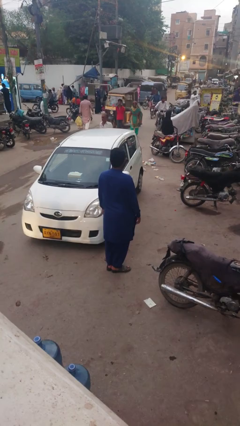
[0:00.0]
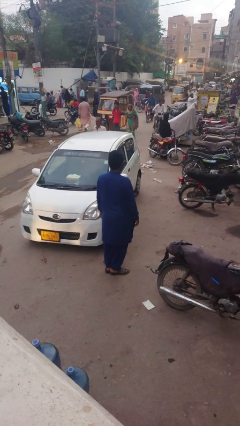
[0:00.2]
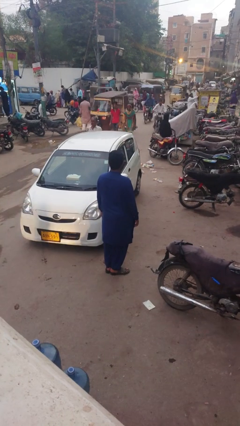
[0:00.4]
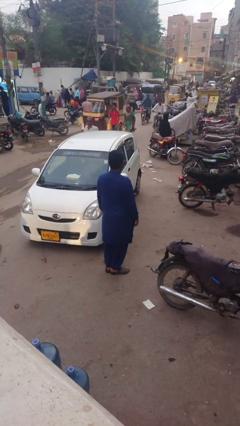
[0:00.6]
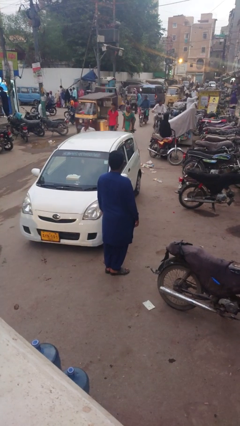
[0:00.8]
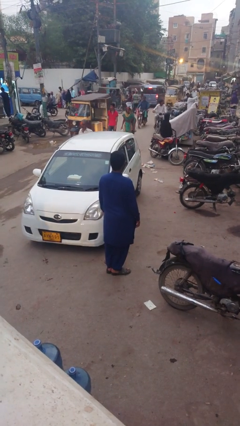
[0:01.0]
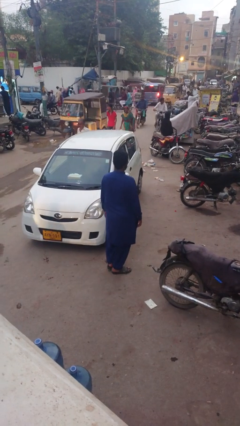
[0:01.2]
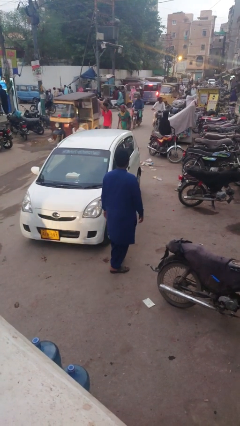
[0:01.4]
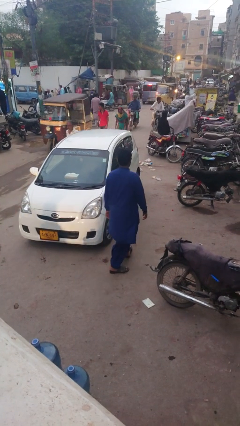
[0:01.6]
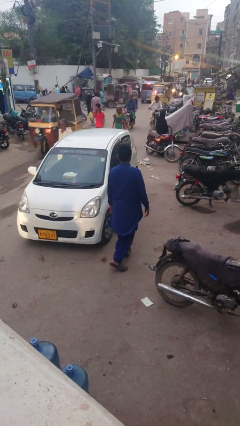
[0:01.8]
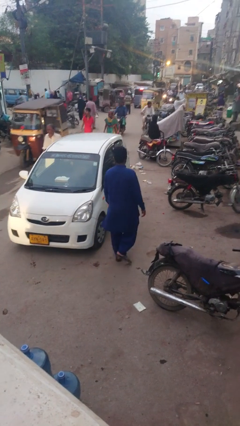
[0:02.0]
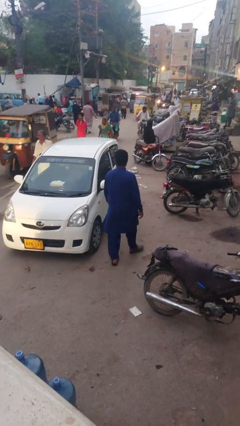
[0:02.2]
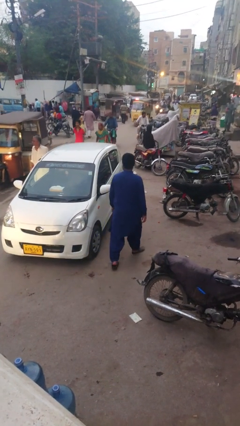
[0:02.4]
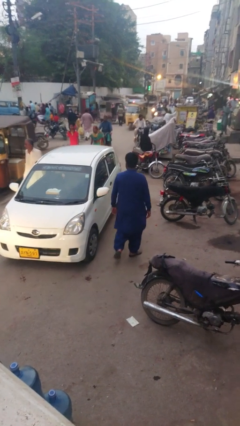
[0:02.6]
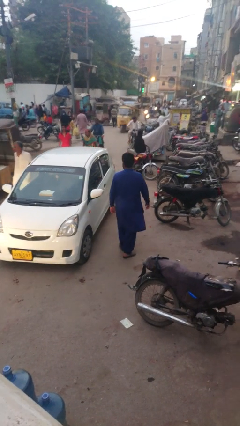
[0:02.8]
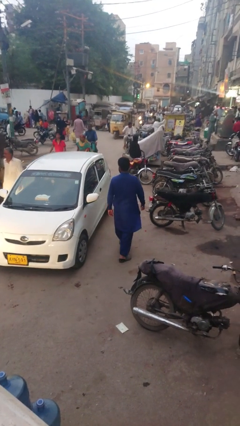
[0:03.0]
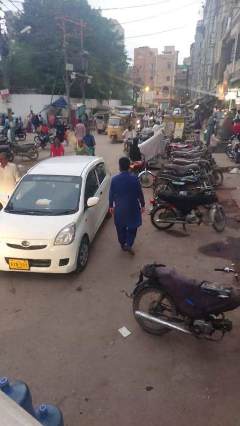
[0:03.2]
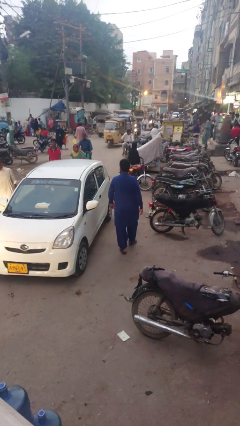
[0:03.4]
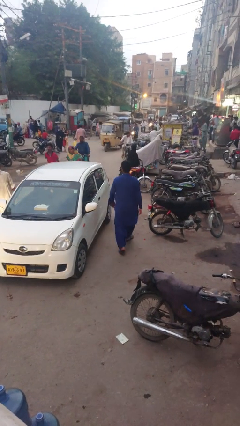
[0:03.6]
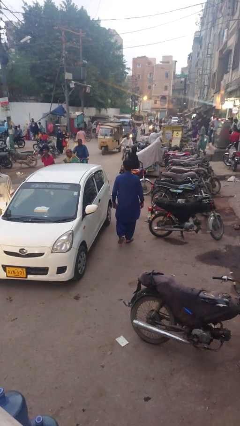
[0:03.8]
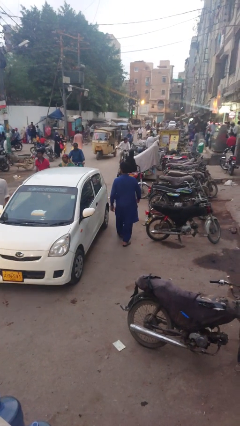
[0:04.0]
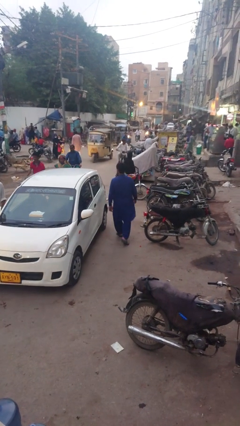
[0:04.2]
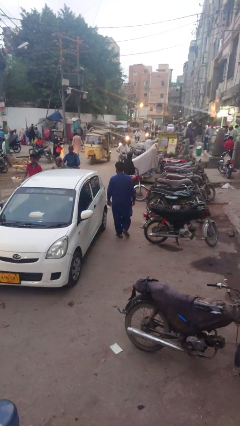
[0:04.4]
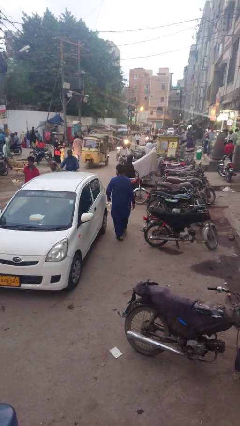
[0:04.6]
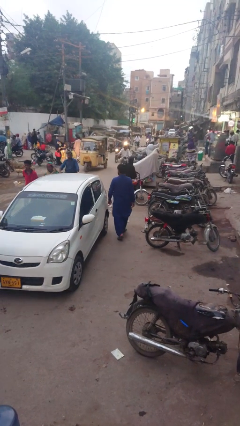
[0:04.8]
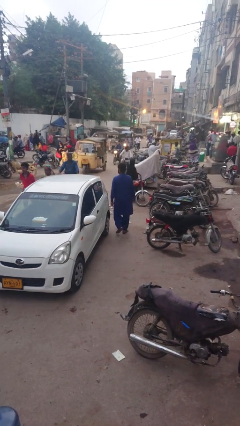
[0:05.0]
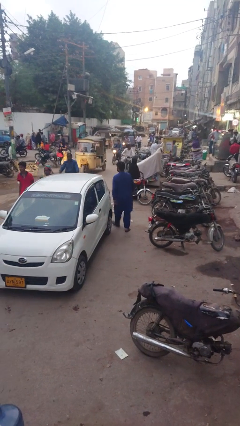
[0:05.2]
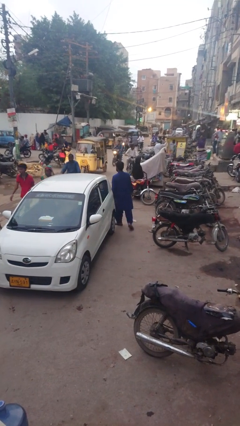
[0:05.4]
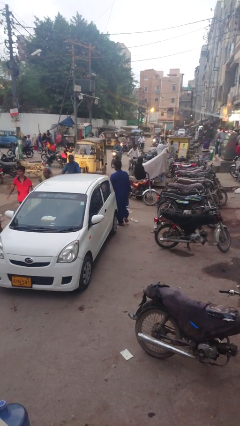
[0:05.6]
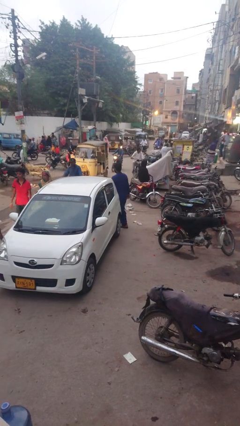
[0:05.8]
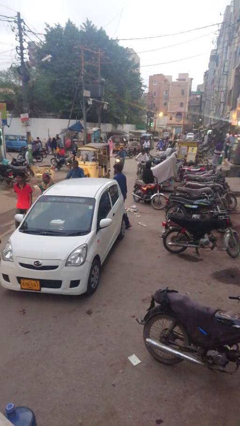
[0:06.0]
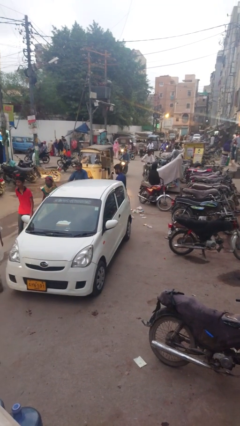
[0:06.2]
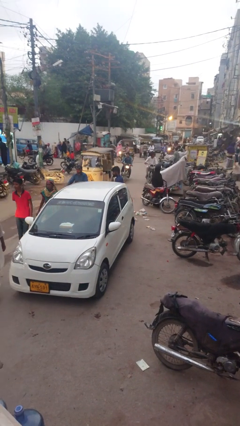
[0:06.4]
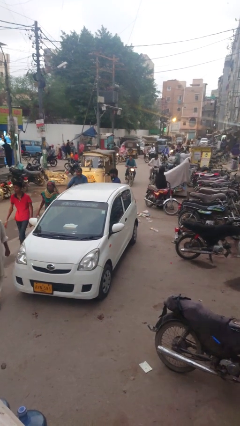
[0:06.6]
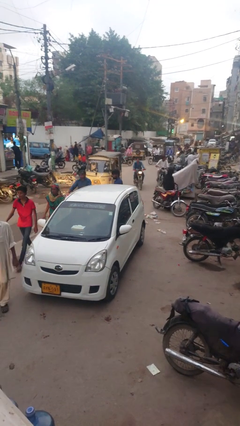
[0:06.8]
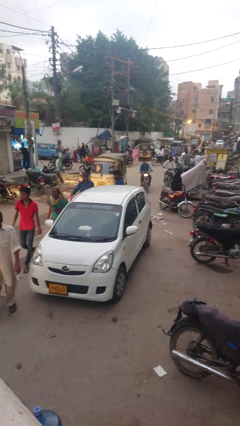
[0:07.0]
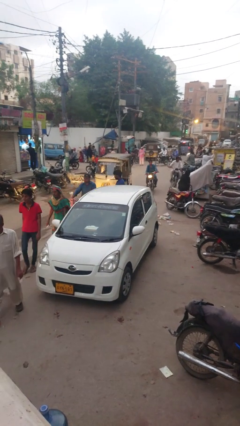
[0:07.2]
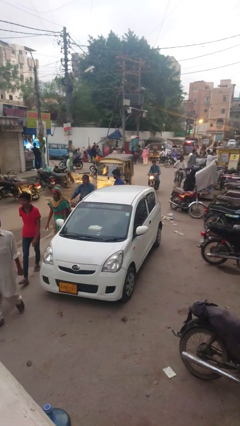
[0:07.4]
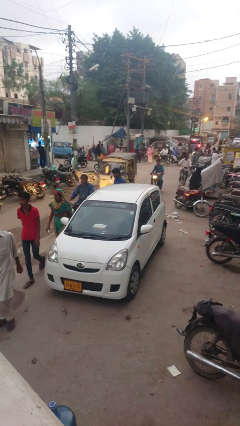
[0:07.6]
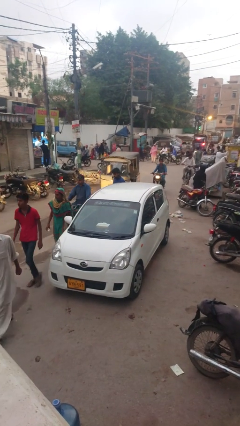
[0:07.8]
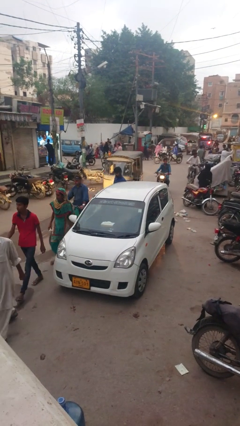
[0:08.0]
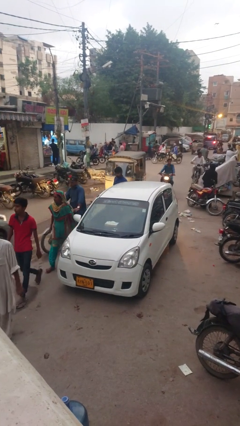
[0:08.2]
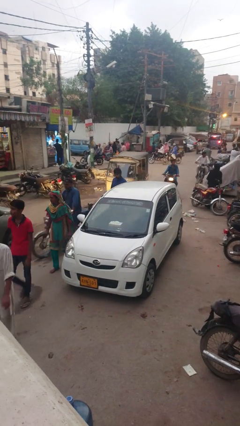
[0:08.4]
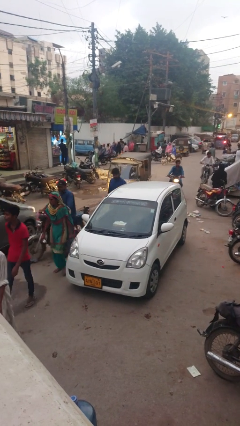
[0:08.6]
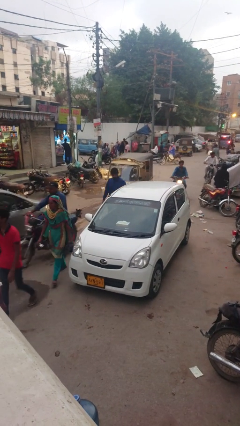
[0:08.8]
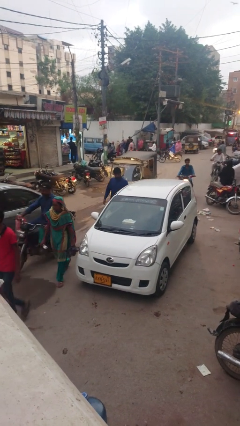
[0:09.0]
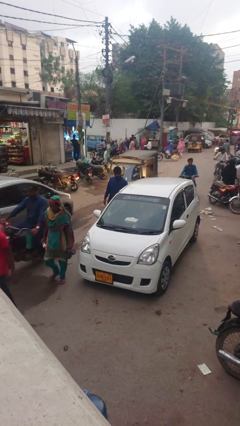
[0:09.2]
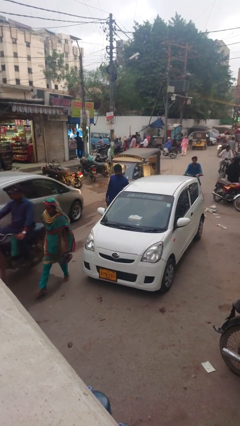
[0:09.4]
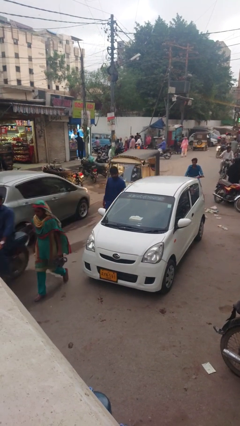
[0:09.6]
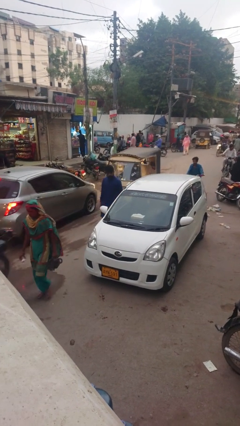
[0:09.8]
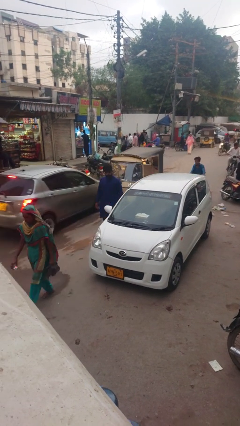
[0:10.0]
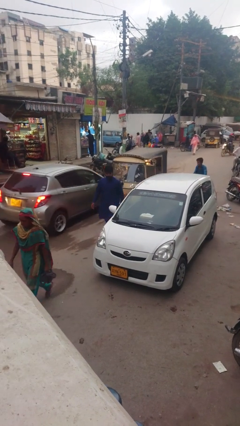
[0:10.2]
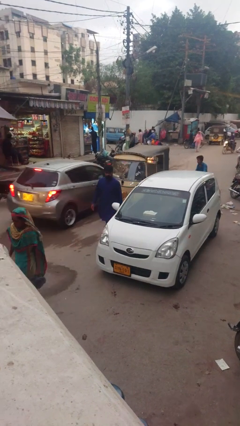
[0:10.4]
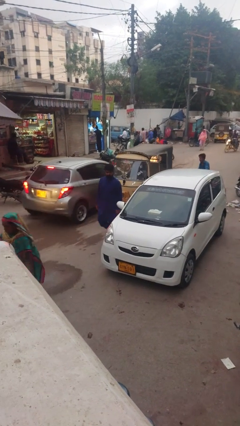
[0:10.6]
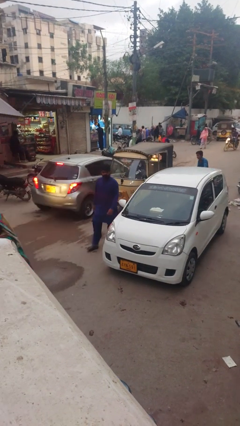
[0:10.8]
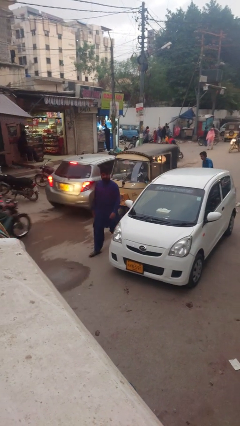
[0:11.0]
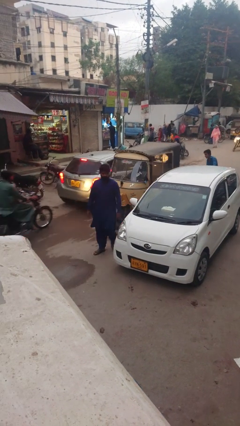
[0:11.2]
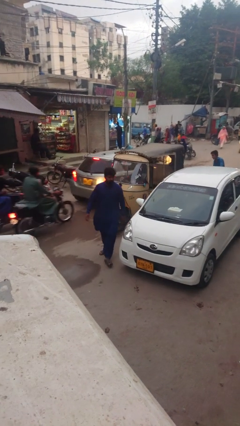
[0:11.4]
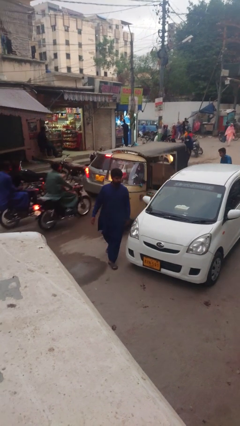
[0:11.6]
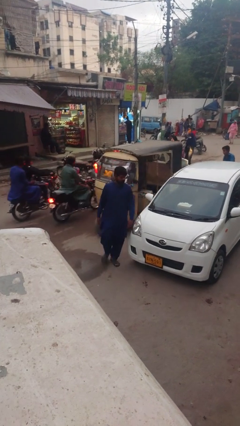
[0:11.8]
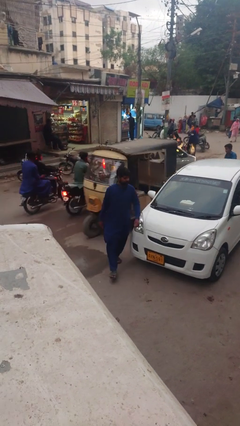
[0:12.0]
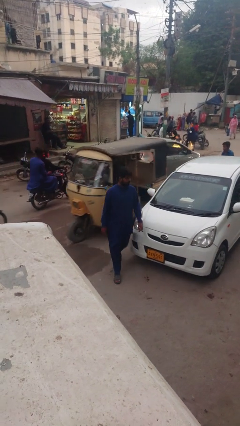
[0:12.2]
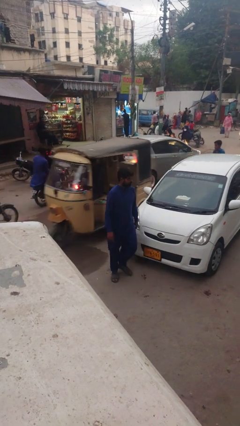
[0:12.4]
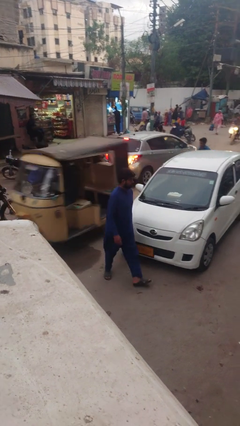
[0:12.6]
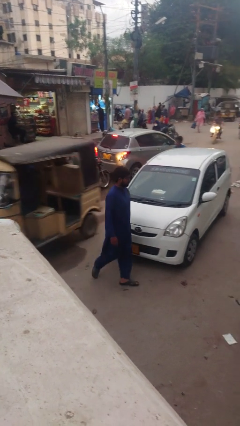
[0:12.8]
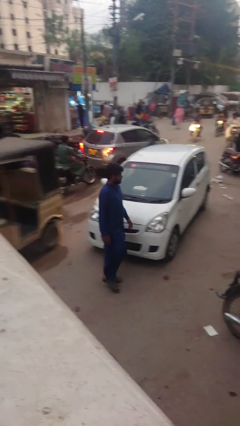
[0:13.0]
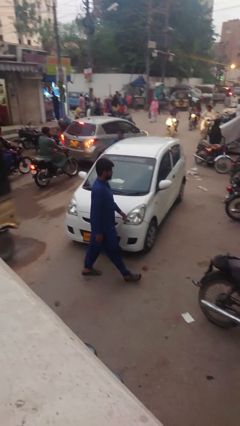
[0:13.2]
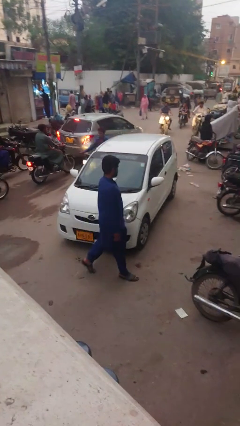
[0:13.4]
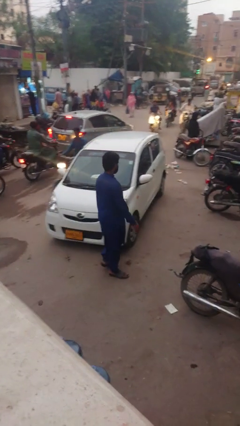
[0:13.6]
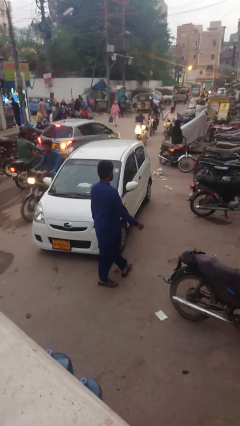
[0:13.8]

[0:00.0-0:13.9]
person walks around car

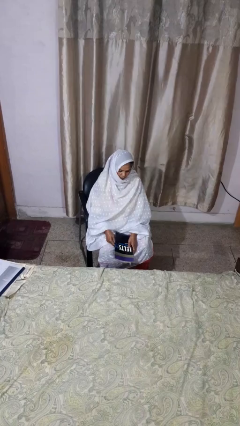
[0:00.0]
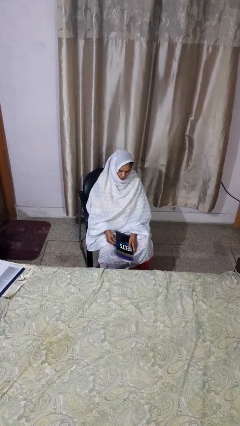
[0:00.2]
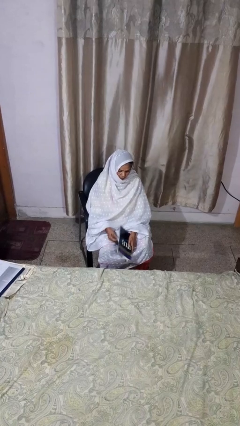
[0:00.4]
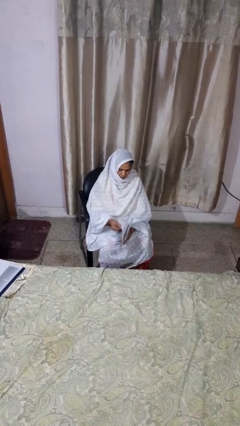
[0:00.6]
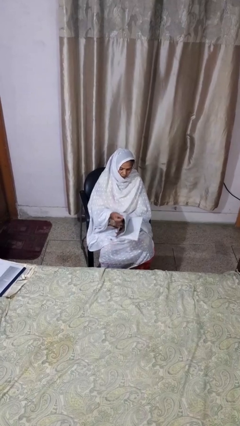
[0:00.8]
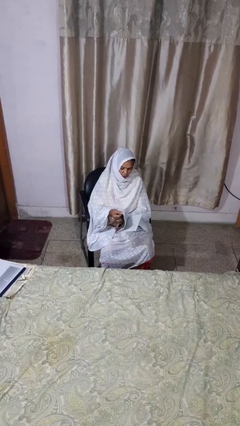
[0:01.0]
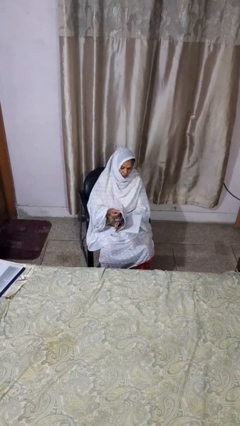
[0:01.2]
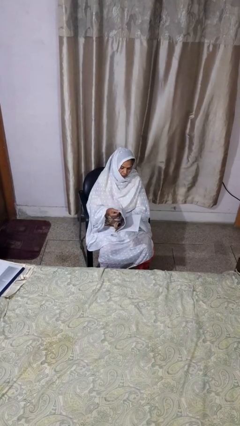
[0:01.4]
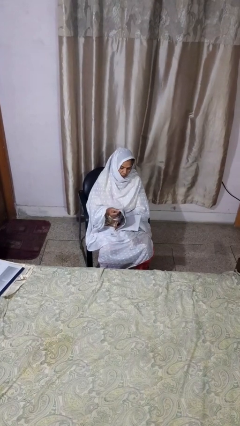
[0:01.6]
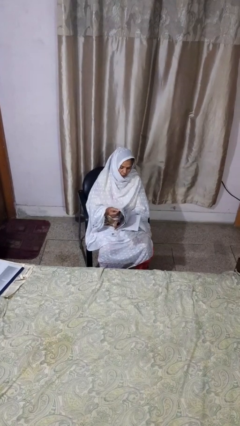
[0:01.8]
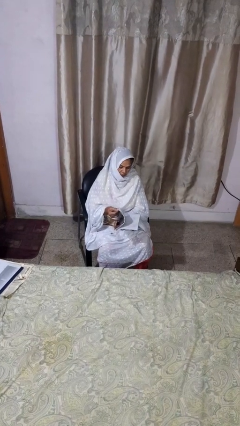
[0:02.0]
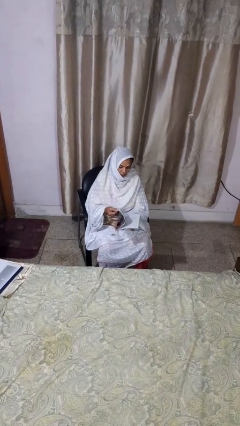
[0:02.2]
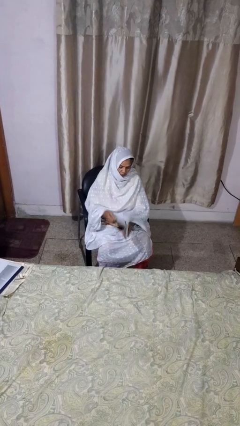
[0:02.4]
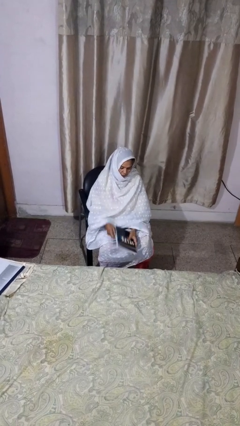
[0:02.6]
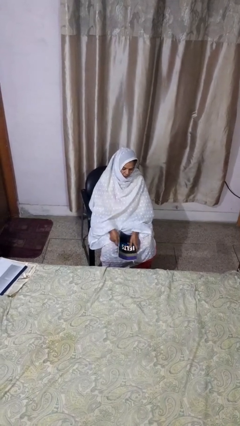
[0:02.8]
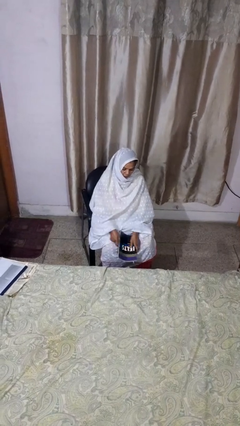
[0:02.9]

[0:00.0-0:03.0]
person reads book

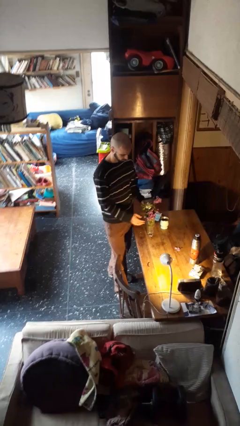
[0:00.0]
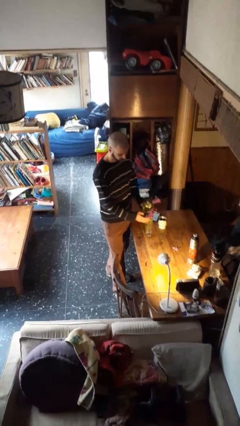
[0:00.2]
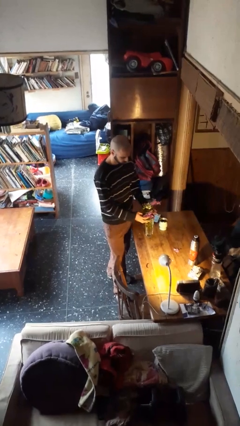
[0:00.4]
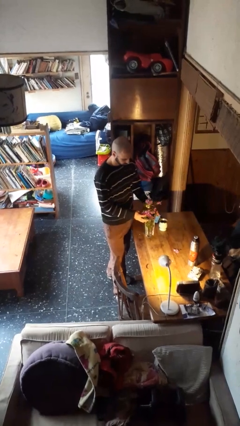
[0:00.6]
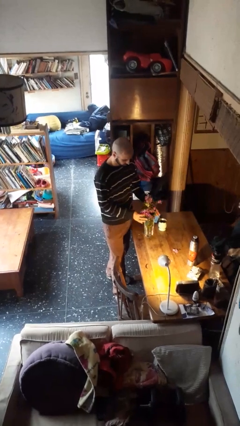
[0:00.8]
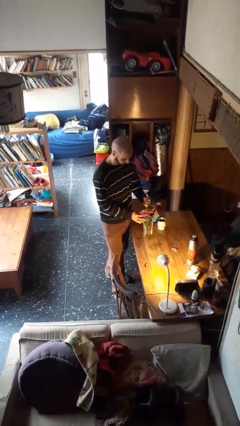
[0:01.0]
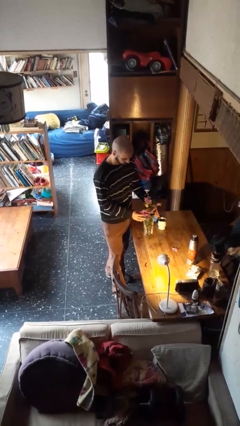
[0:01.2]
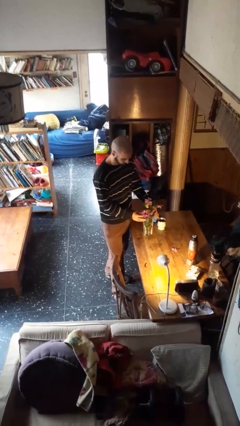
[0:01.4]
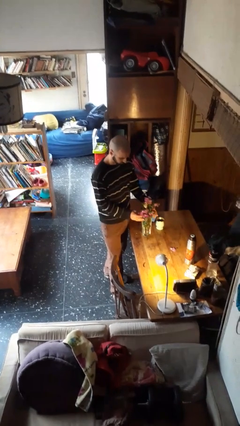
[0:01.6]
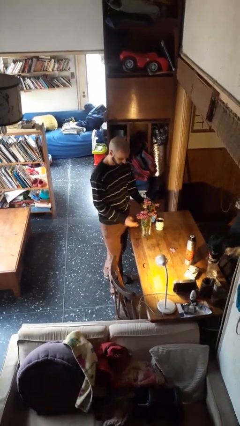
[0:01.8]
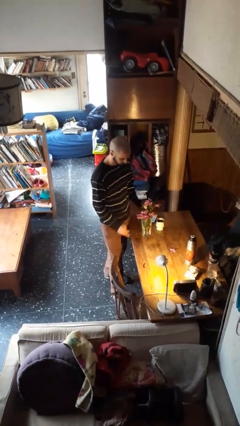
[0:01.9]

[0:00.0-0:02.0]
person arranges flowers in vase
